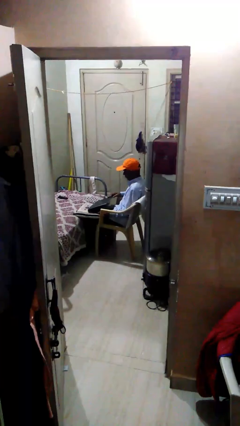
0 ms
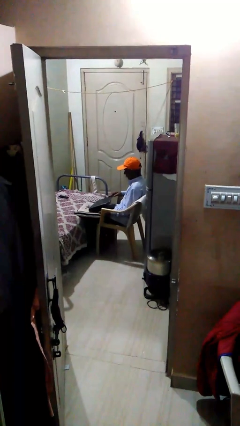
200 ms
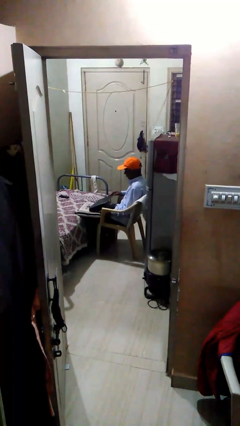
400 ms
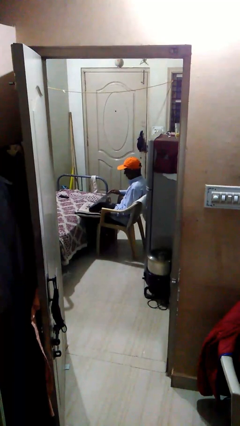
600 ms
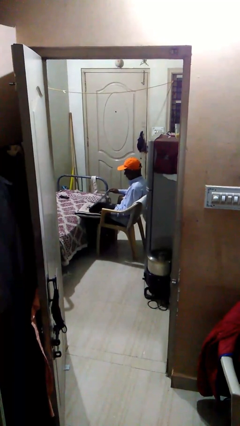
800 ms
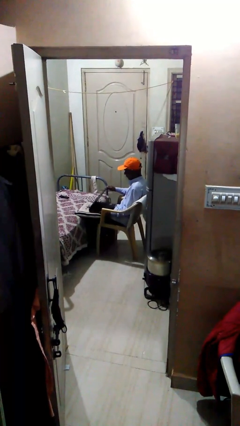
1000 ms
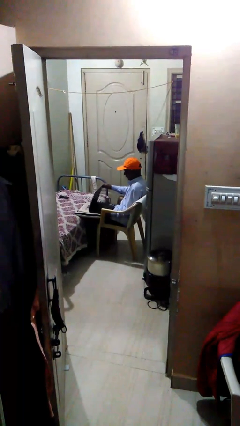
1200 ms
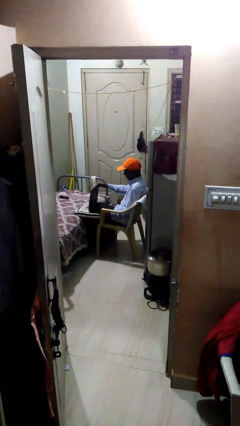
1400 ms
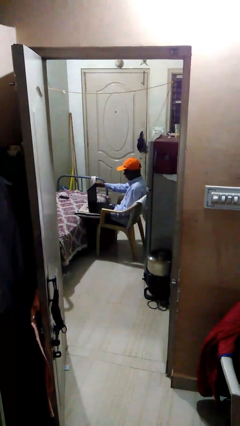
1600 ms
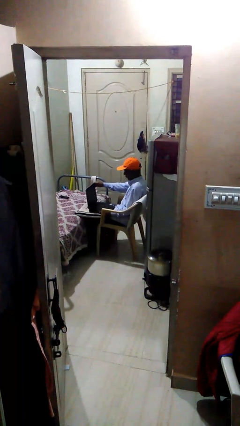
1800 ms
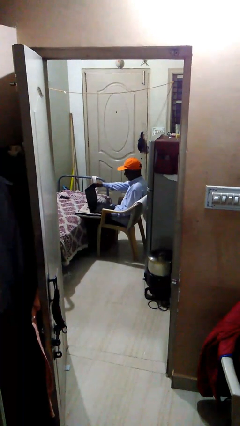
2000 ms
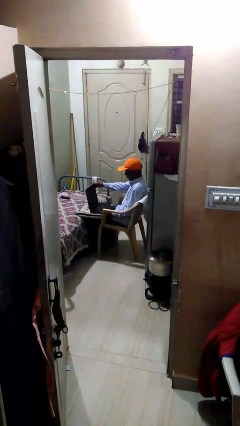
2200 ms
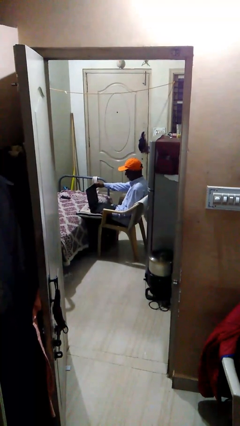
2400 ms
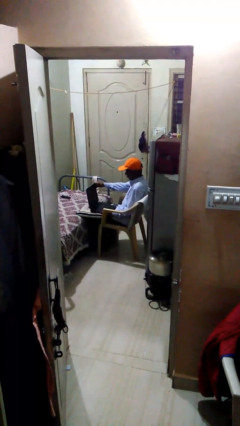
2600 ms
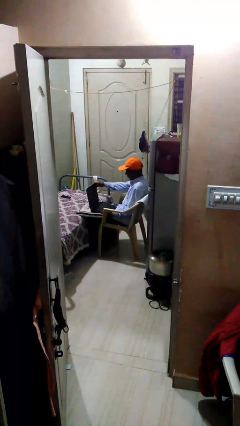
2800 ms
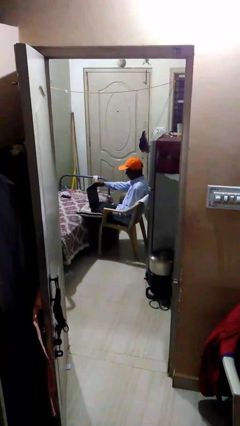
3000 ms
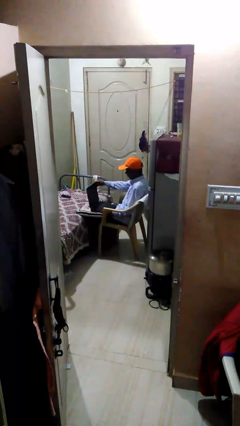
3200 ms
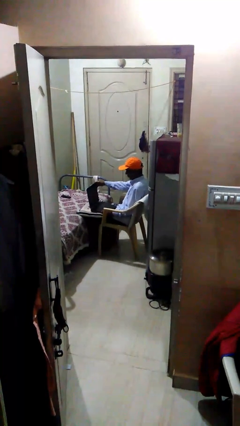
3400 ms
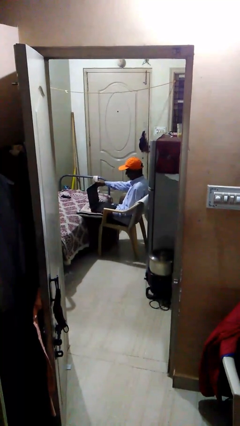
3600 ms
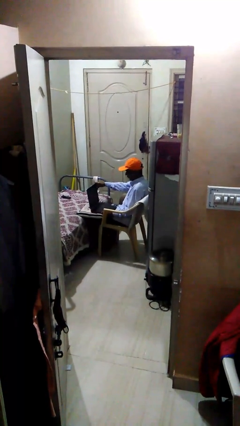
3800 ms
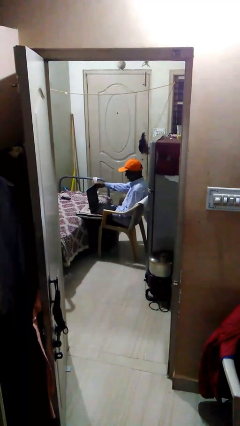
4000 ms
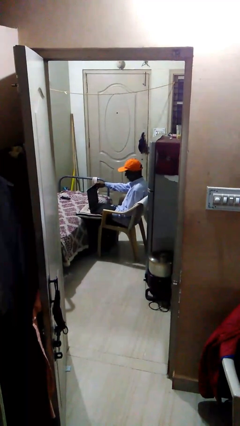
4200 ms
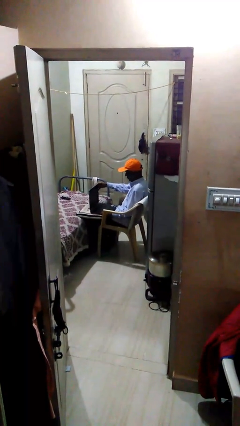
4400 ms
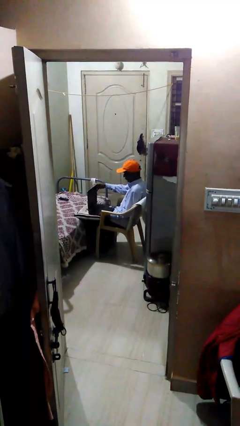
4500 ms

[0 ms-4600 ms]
person interacts with laptop

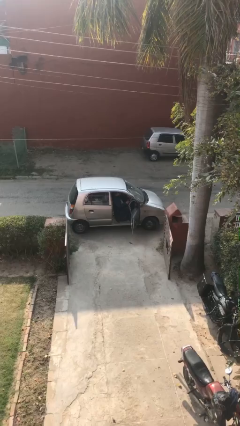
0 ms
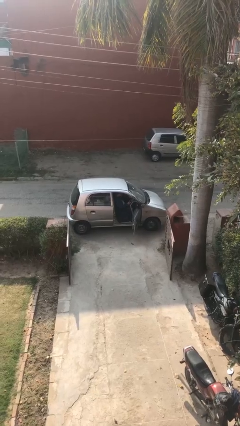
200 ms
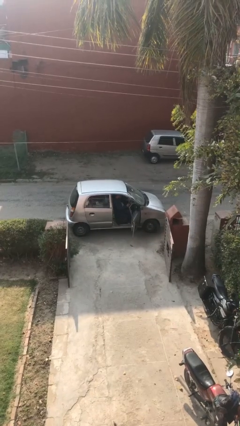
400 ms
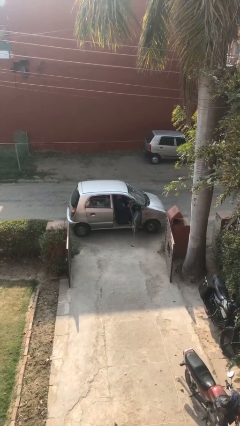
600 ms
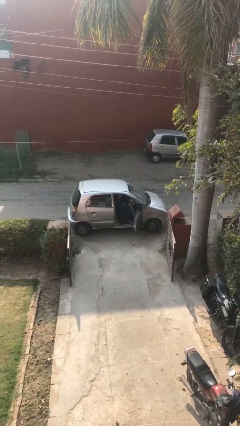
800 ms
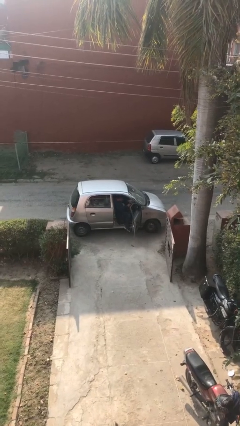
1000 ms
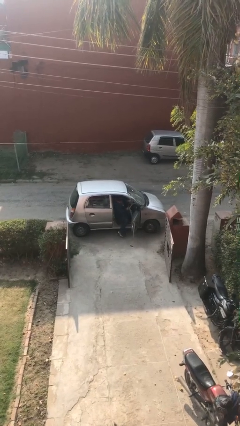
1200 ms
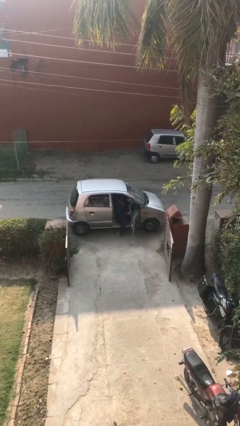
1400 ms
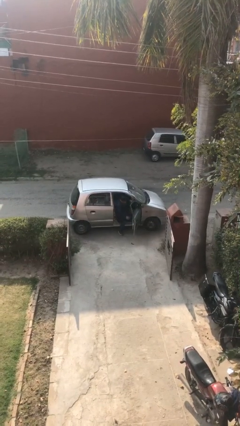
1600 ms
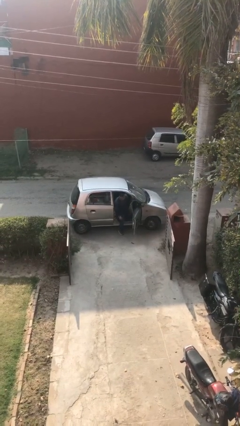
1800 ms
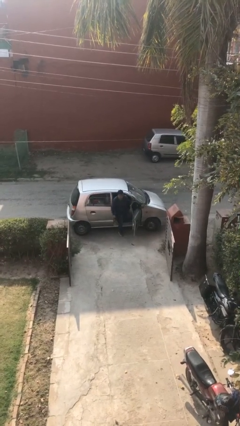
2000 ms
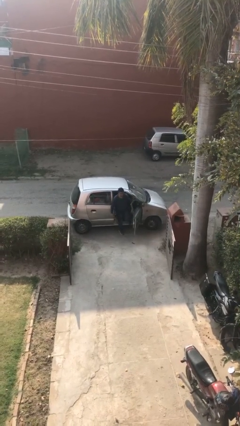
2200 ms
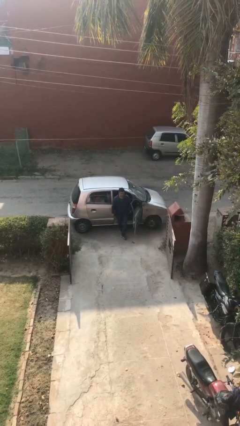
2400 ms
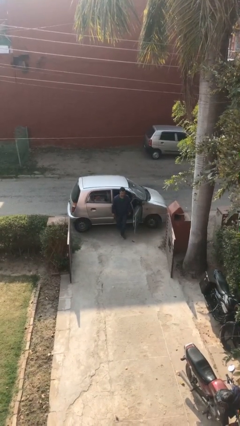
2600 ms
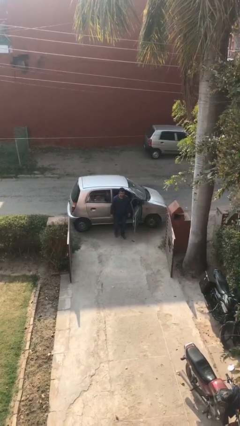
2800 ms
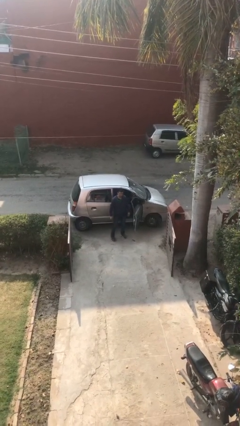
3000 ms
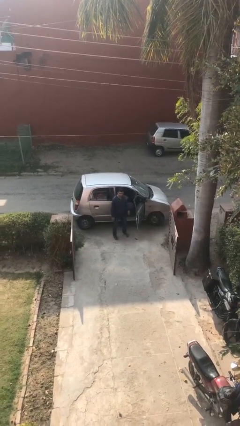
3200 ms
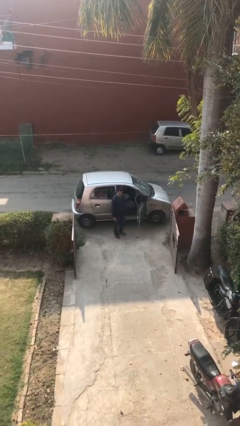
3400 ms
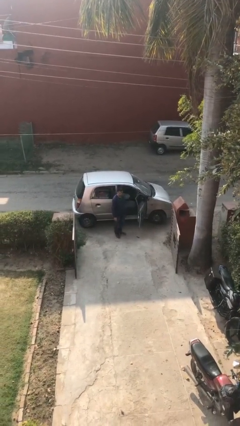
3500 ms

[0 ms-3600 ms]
person exits car

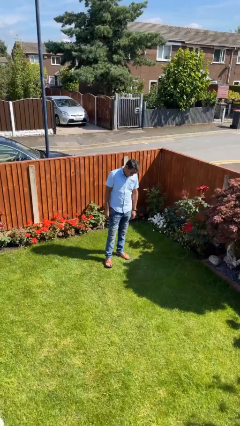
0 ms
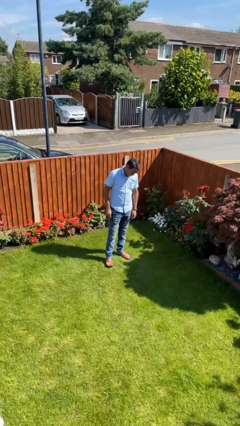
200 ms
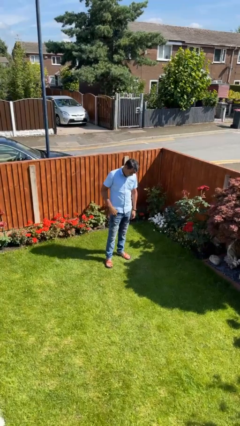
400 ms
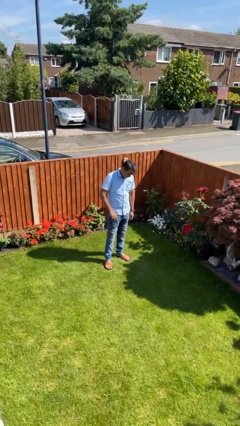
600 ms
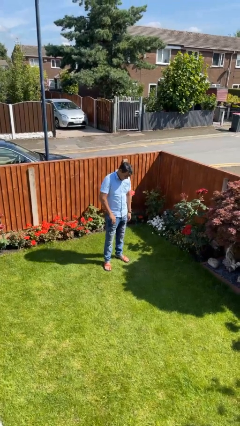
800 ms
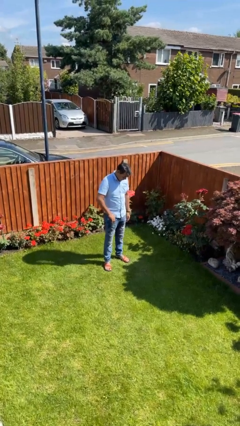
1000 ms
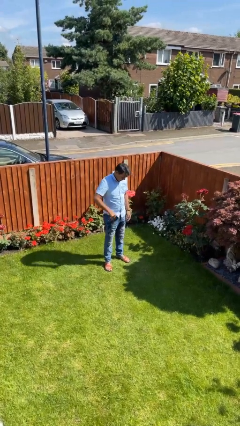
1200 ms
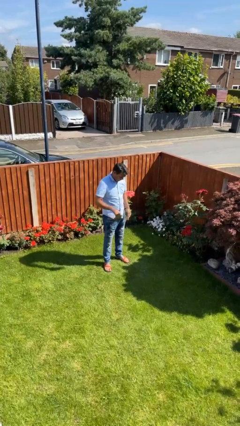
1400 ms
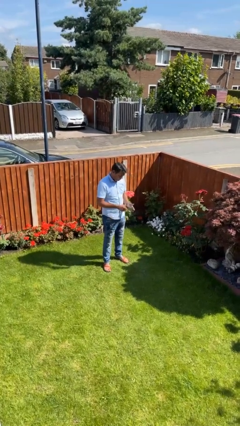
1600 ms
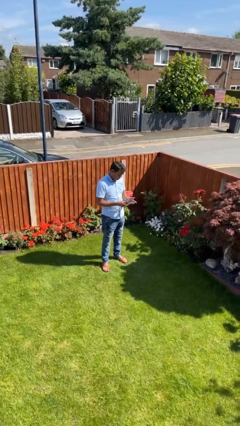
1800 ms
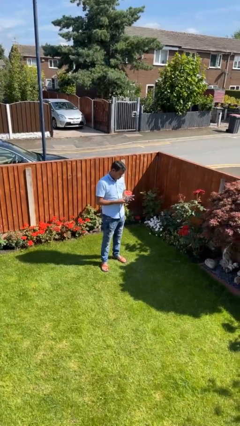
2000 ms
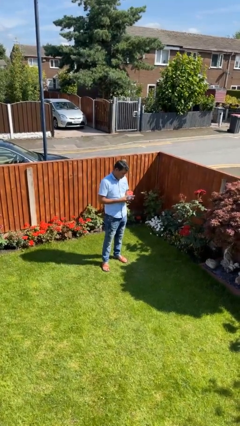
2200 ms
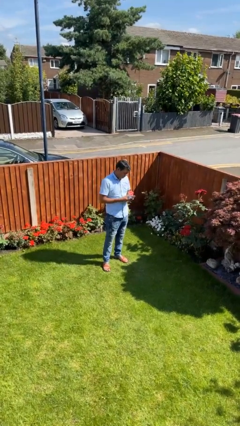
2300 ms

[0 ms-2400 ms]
person takes phone from pocket

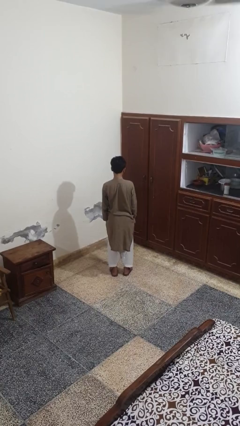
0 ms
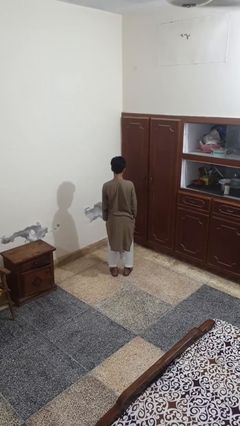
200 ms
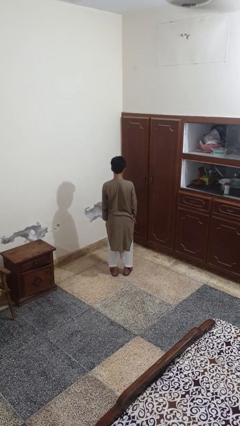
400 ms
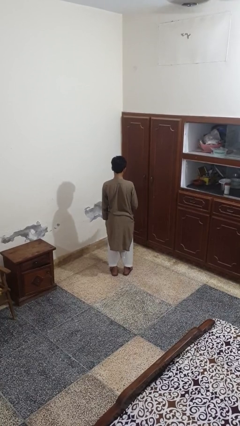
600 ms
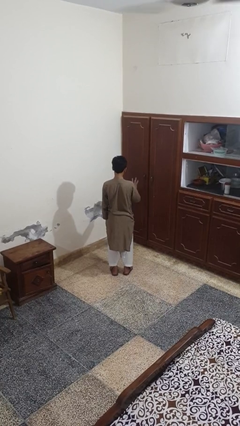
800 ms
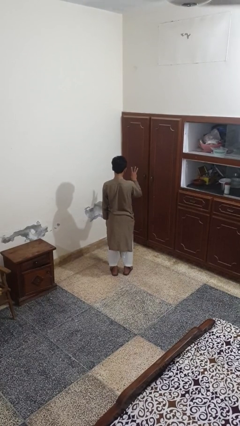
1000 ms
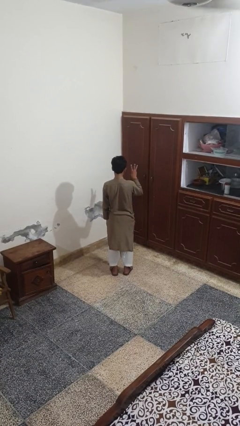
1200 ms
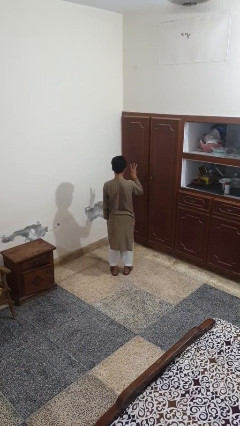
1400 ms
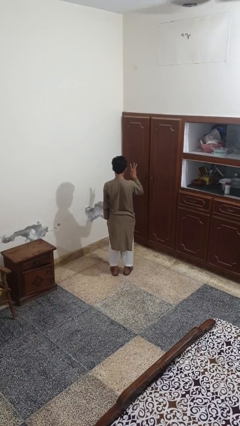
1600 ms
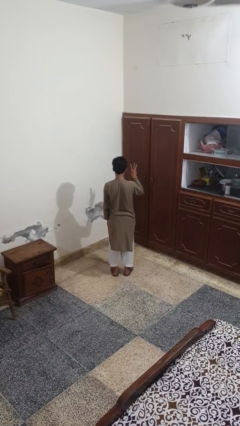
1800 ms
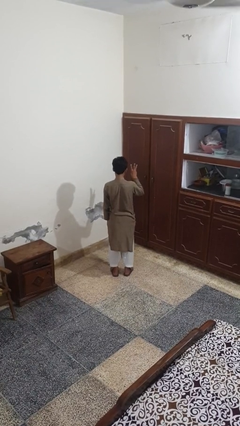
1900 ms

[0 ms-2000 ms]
person gestures number three

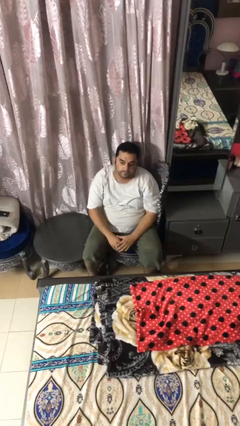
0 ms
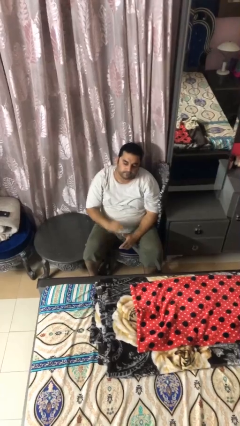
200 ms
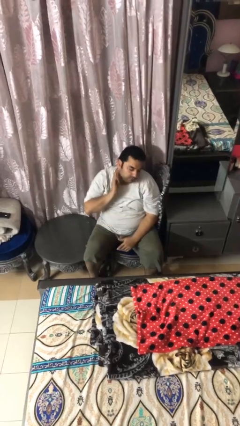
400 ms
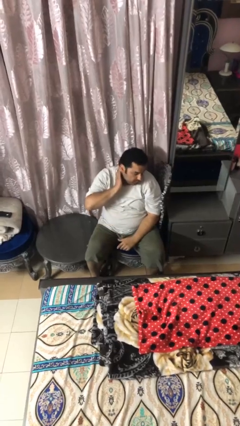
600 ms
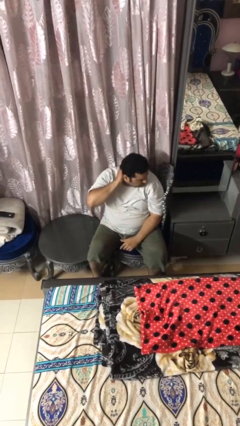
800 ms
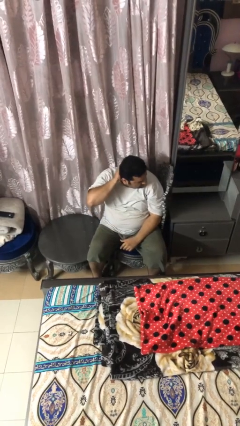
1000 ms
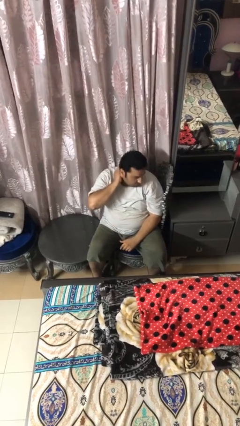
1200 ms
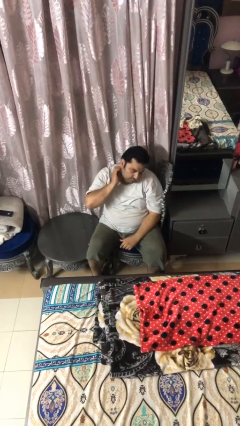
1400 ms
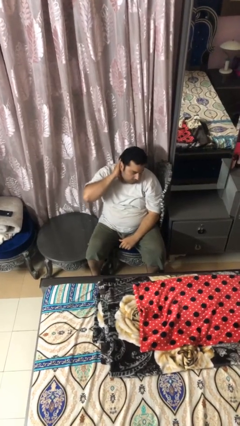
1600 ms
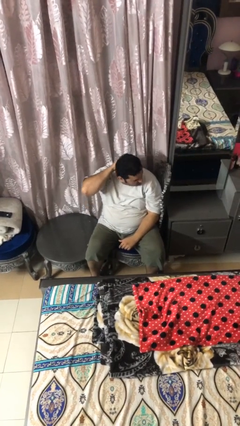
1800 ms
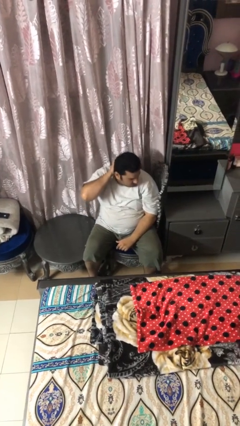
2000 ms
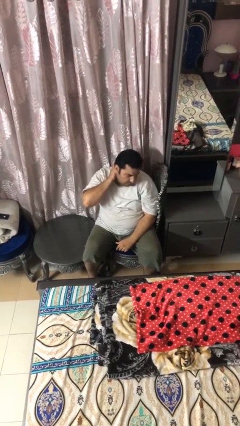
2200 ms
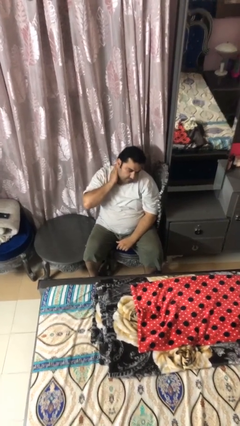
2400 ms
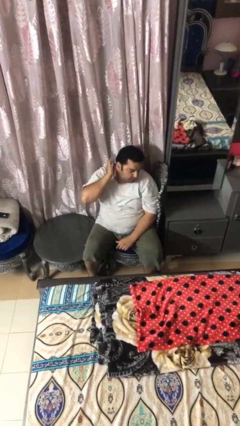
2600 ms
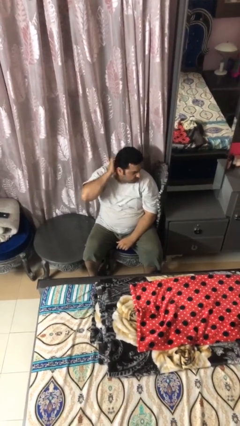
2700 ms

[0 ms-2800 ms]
person strokes hair

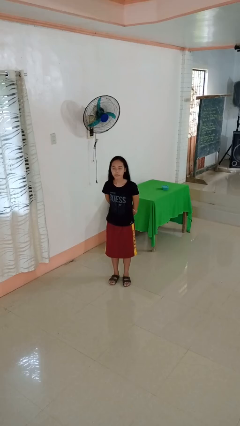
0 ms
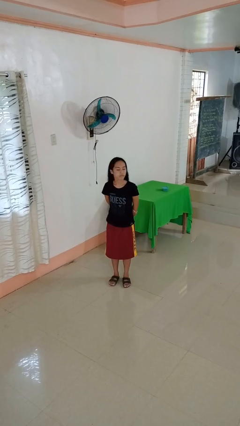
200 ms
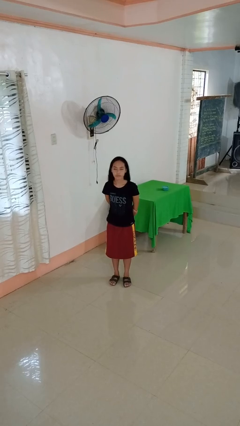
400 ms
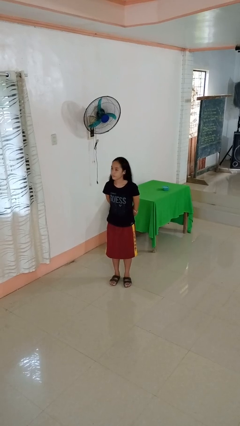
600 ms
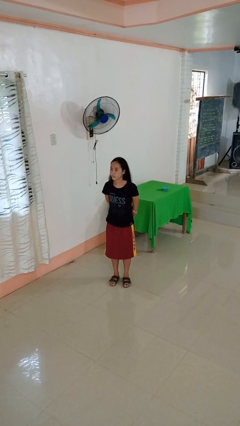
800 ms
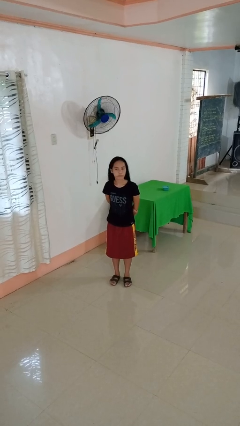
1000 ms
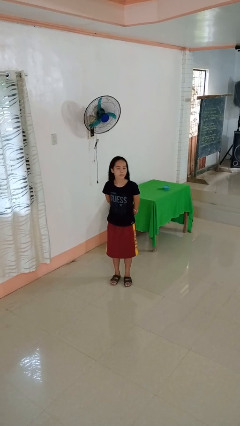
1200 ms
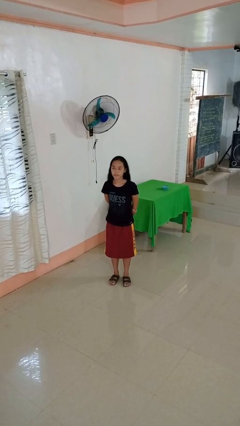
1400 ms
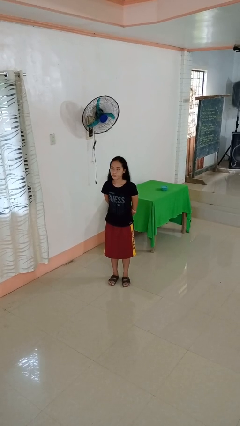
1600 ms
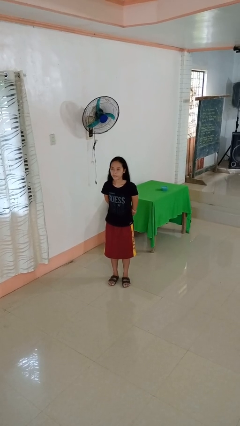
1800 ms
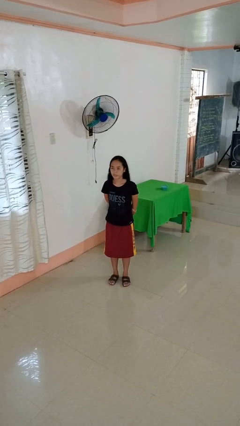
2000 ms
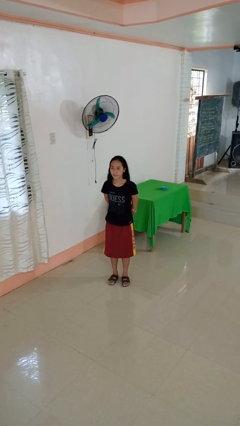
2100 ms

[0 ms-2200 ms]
person shakes head

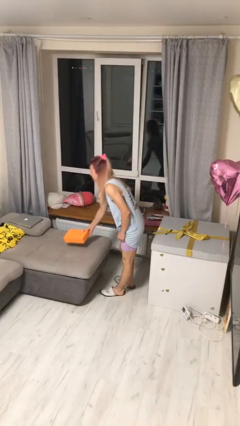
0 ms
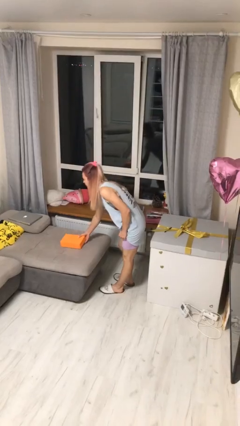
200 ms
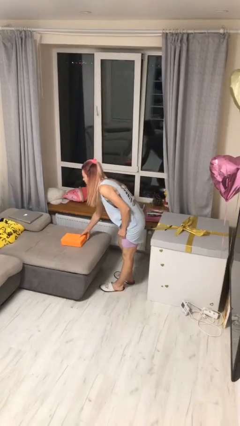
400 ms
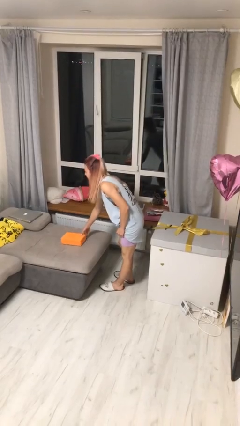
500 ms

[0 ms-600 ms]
person puts down object on couch
